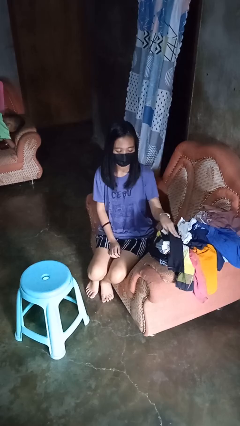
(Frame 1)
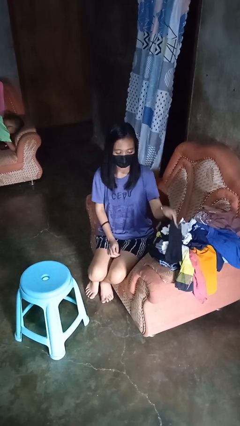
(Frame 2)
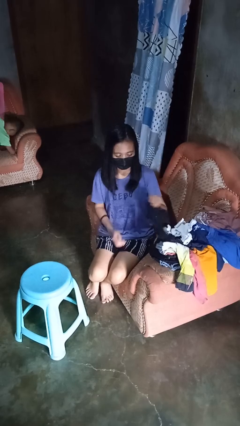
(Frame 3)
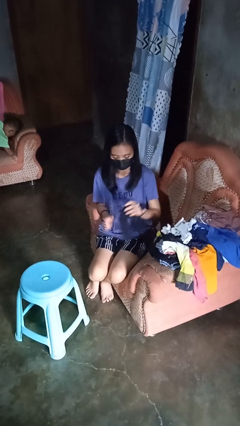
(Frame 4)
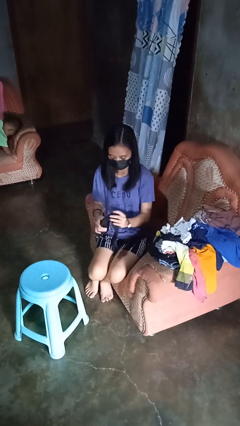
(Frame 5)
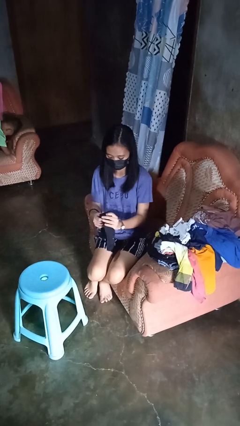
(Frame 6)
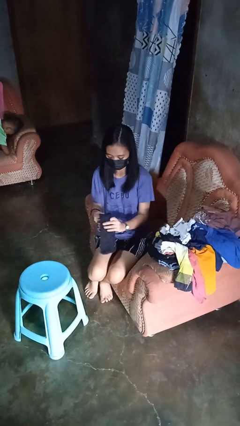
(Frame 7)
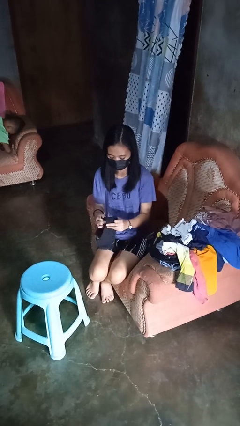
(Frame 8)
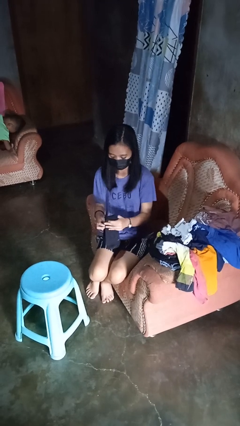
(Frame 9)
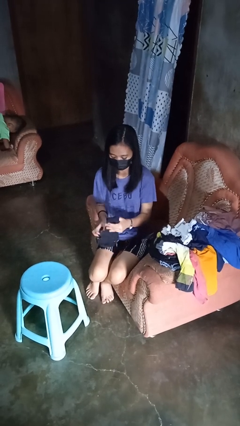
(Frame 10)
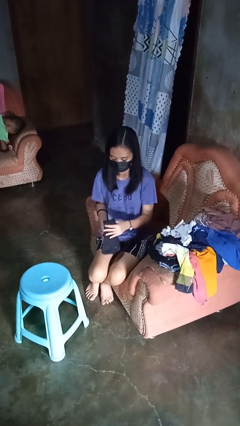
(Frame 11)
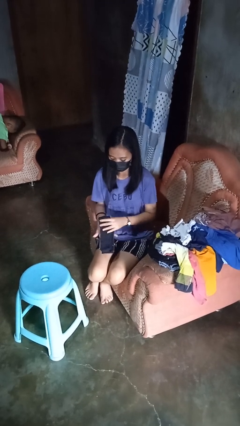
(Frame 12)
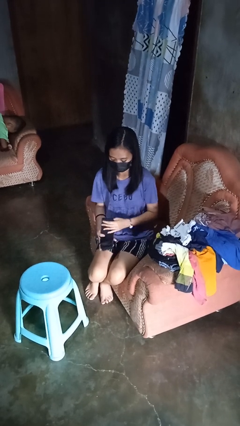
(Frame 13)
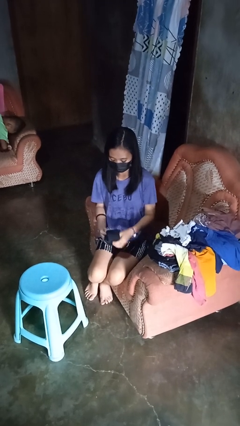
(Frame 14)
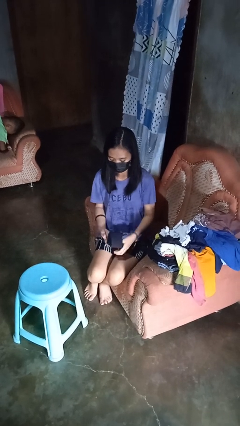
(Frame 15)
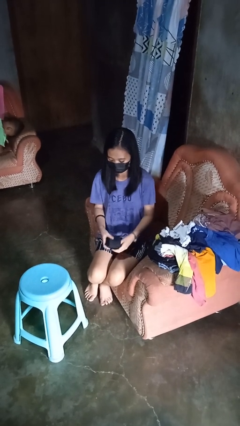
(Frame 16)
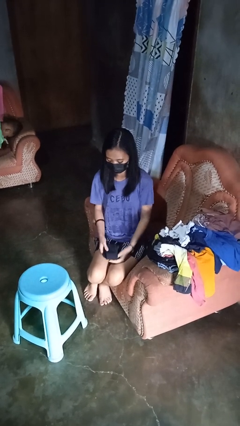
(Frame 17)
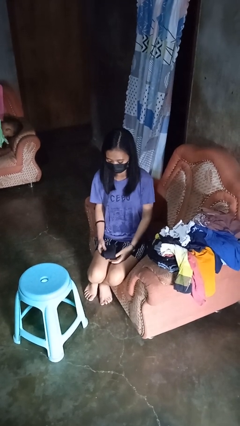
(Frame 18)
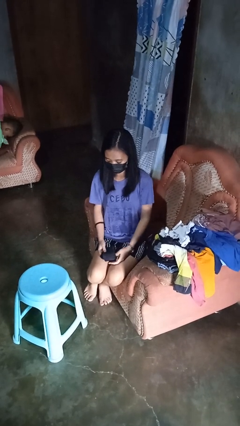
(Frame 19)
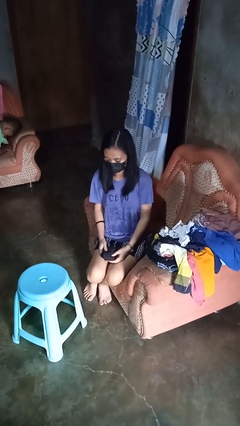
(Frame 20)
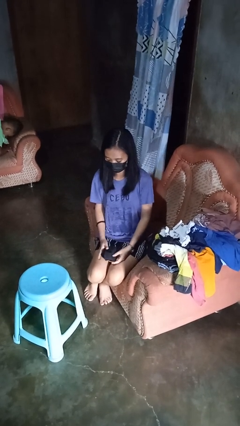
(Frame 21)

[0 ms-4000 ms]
person folds socks

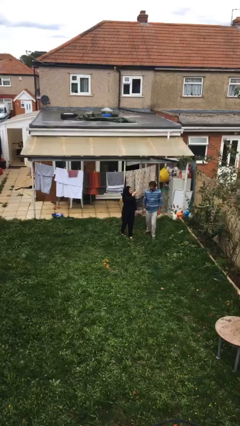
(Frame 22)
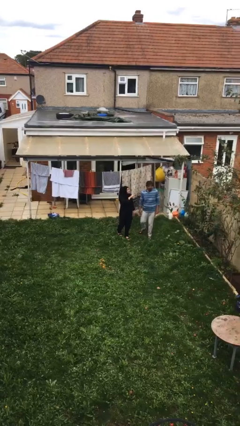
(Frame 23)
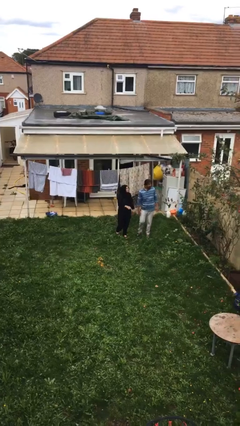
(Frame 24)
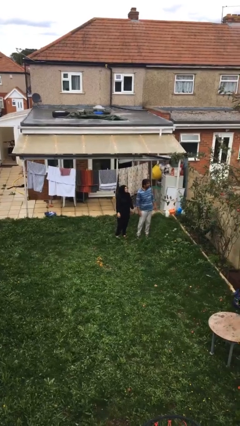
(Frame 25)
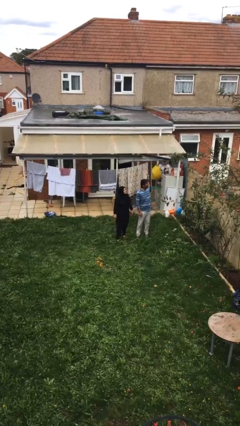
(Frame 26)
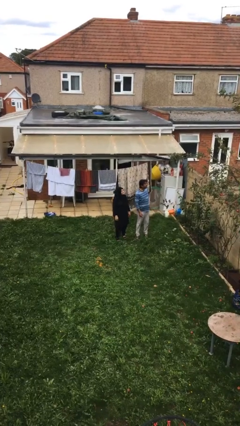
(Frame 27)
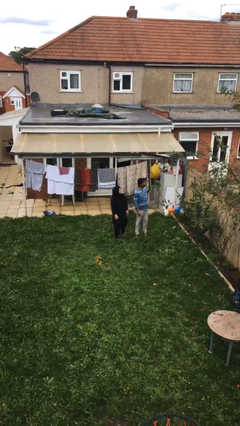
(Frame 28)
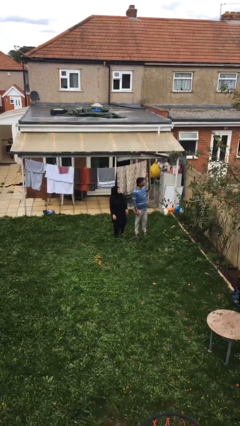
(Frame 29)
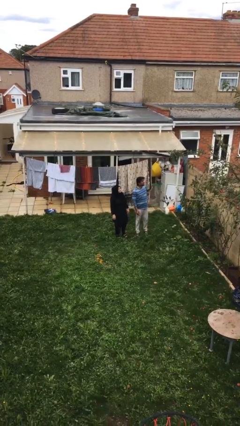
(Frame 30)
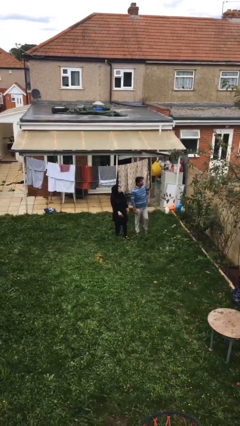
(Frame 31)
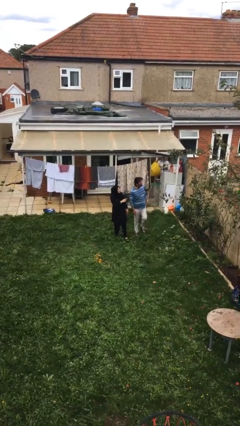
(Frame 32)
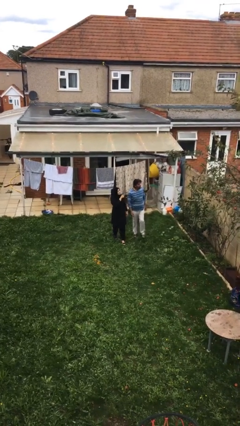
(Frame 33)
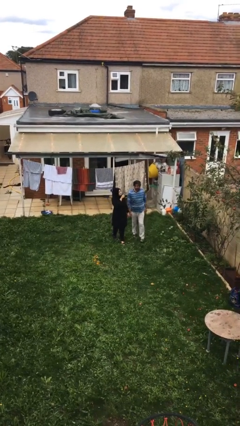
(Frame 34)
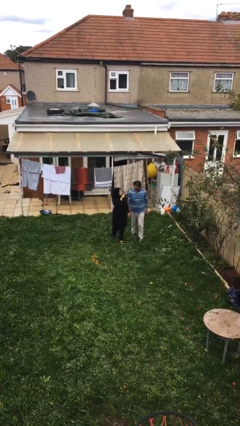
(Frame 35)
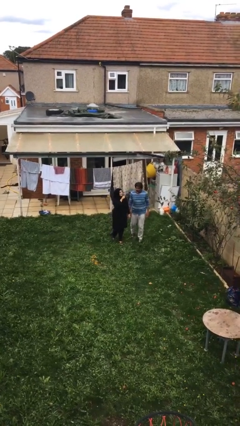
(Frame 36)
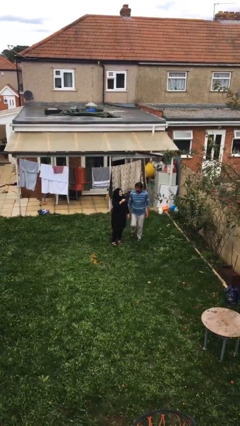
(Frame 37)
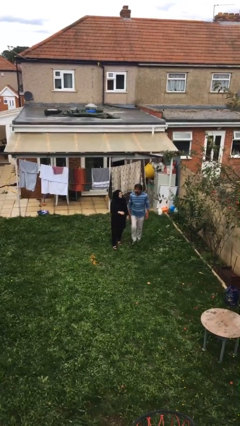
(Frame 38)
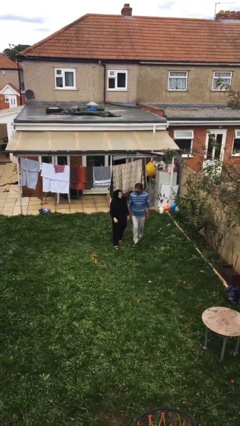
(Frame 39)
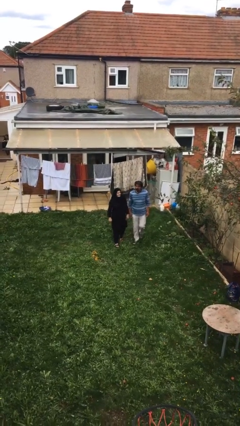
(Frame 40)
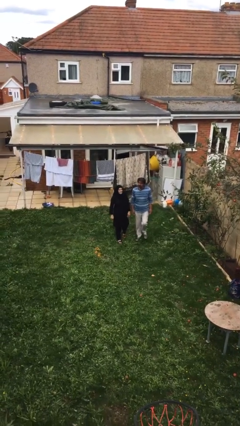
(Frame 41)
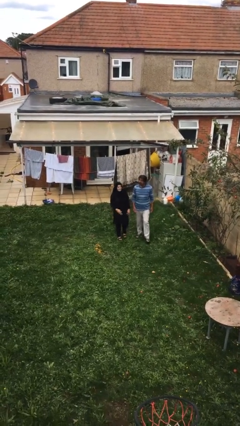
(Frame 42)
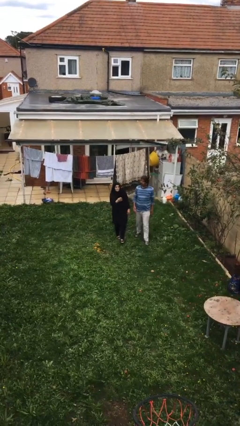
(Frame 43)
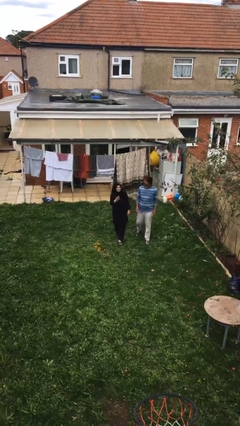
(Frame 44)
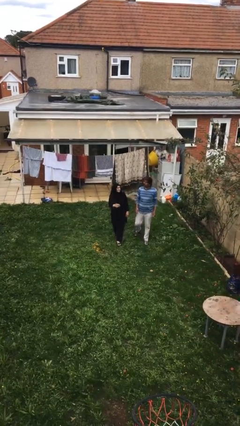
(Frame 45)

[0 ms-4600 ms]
person talks to person

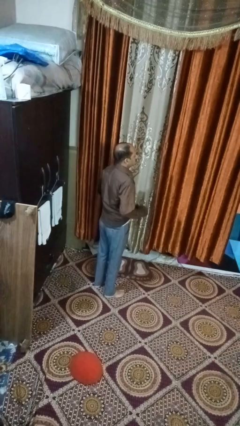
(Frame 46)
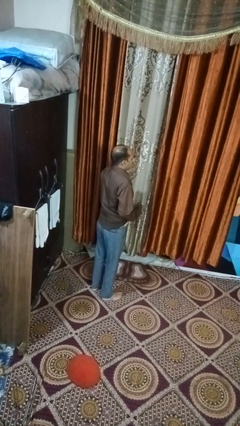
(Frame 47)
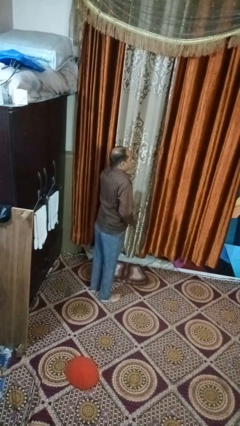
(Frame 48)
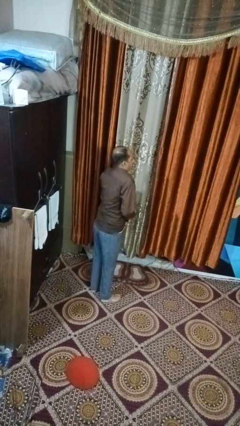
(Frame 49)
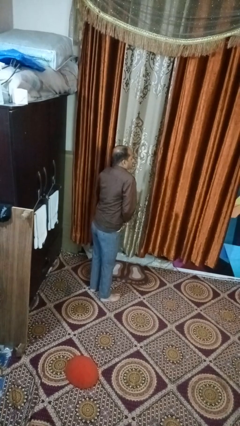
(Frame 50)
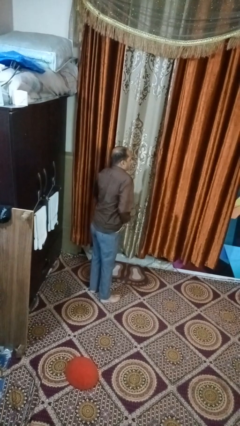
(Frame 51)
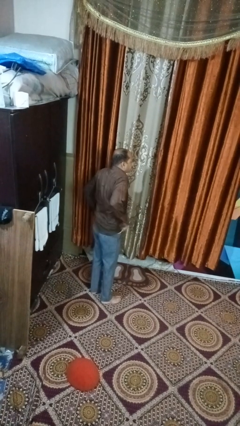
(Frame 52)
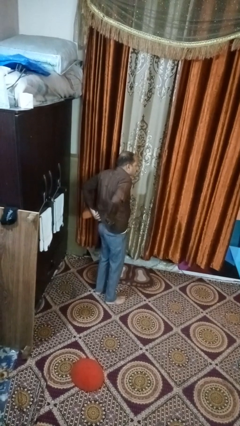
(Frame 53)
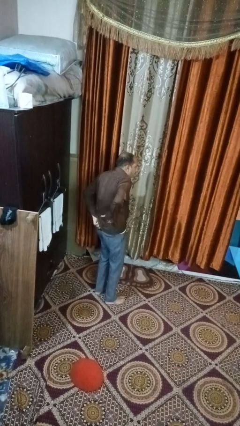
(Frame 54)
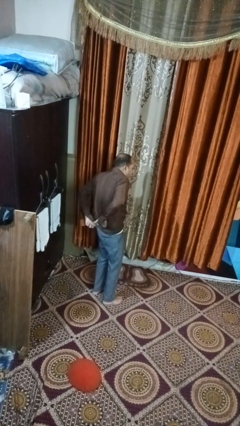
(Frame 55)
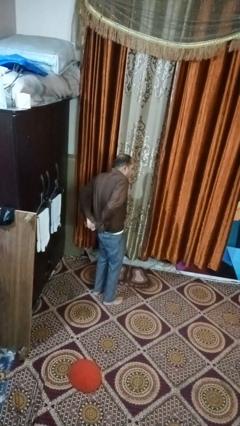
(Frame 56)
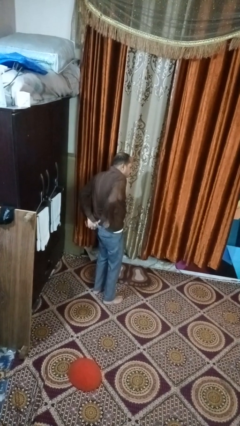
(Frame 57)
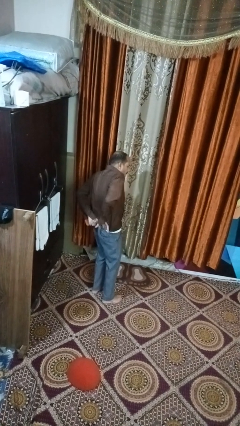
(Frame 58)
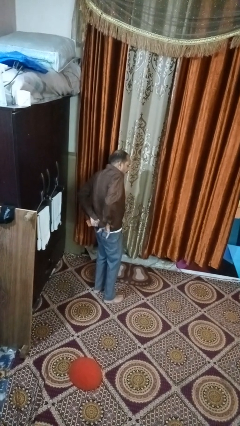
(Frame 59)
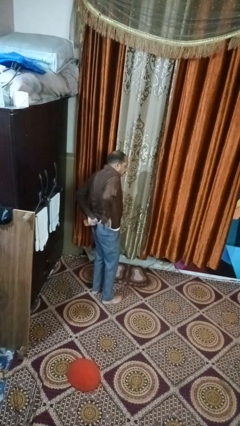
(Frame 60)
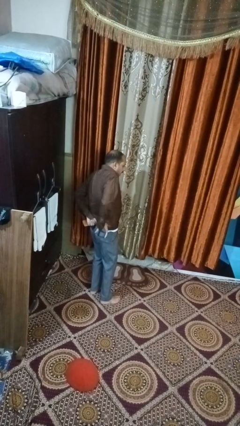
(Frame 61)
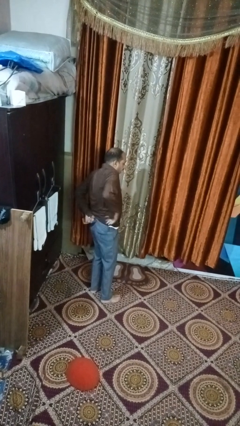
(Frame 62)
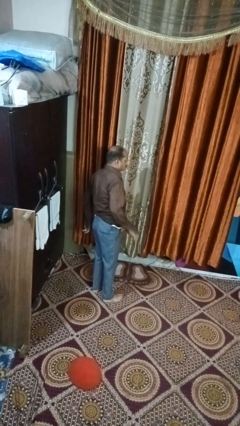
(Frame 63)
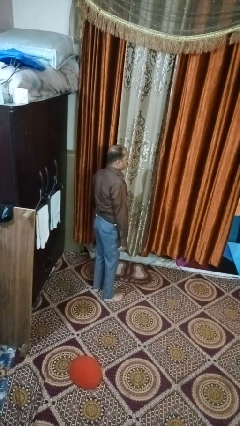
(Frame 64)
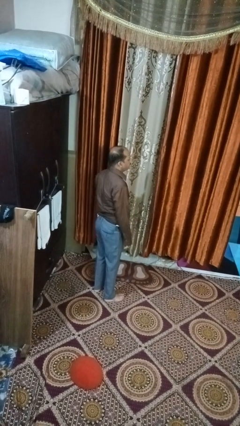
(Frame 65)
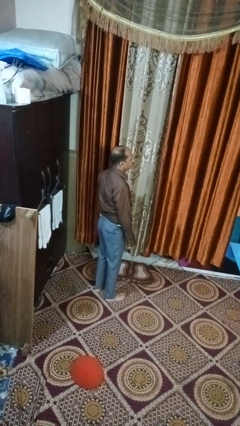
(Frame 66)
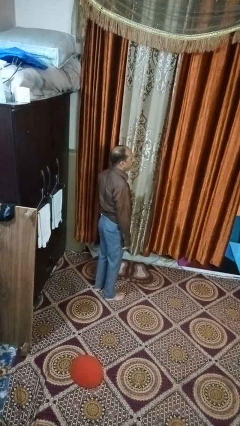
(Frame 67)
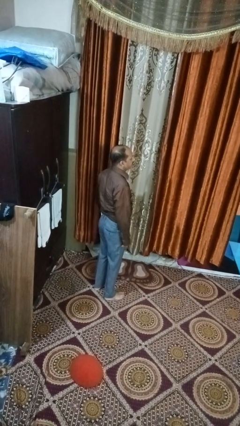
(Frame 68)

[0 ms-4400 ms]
person tucks in shirt

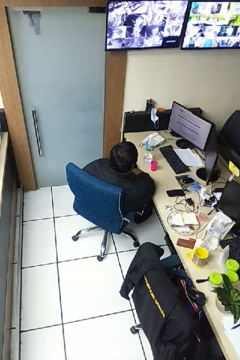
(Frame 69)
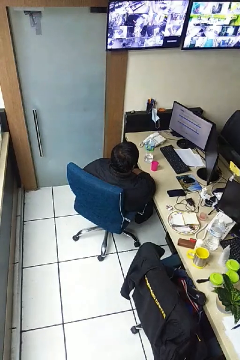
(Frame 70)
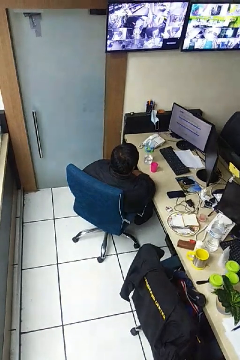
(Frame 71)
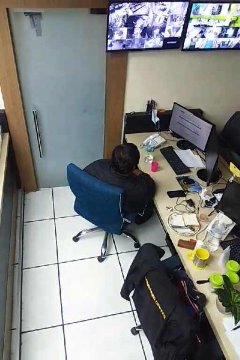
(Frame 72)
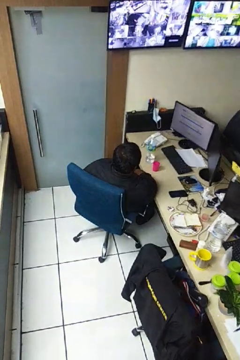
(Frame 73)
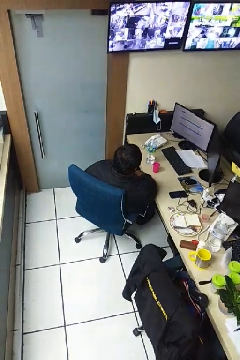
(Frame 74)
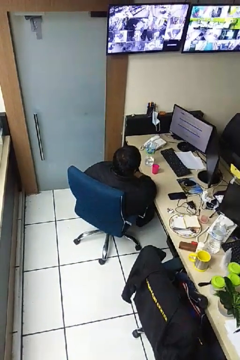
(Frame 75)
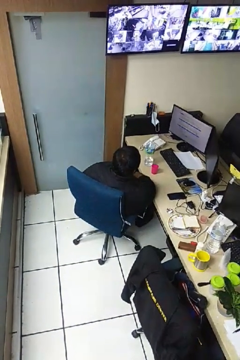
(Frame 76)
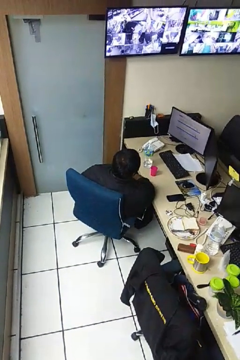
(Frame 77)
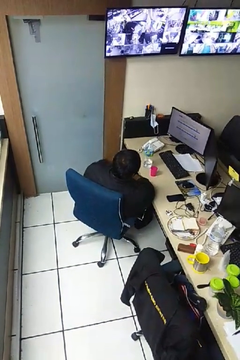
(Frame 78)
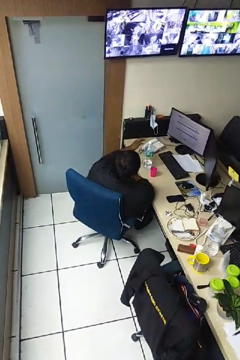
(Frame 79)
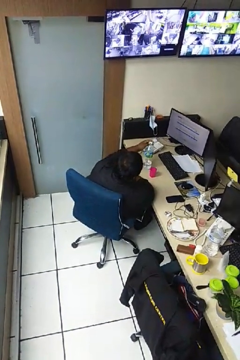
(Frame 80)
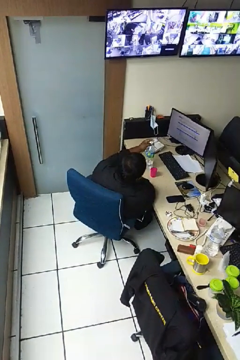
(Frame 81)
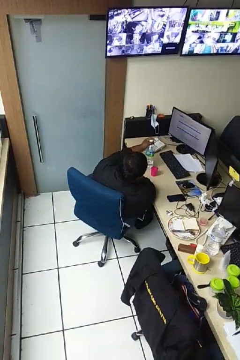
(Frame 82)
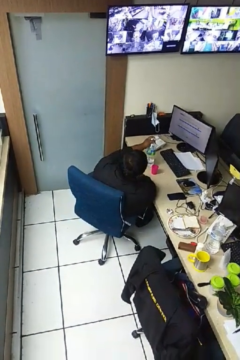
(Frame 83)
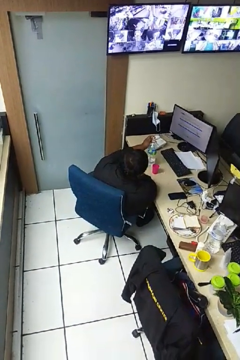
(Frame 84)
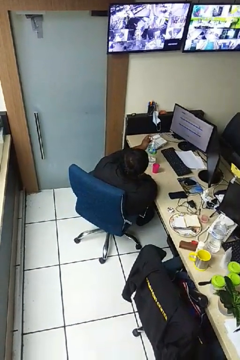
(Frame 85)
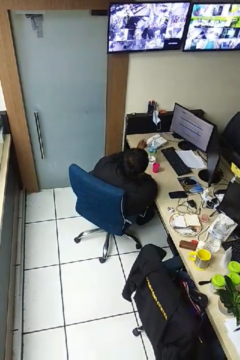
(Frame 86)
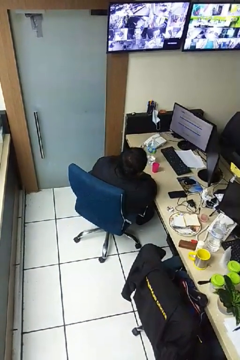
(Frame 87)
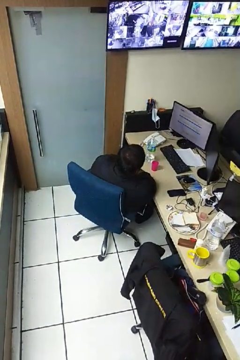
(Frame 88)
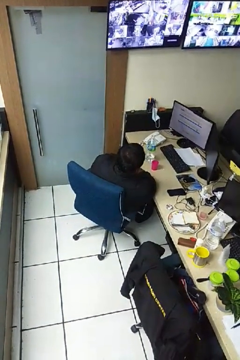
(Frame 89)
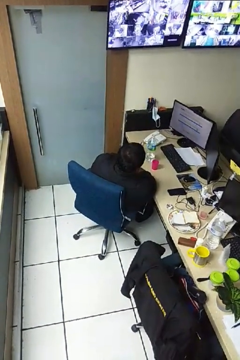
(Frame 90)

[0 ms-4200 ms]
person unscrews lid from bottle

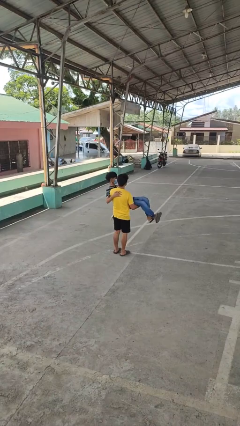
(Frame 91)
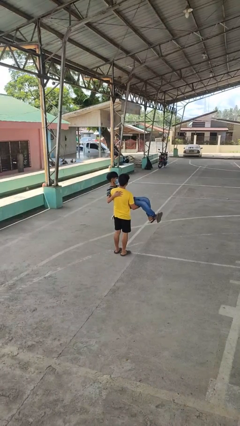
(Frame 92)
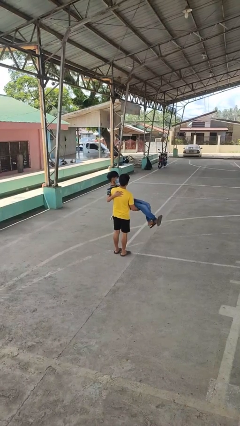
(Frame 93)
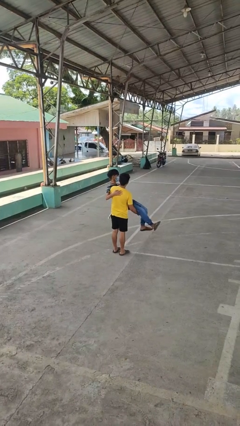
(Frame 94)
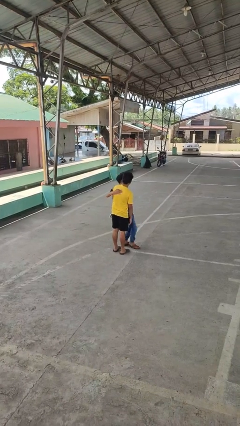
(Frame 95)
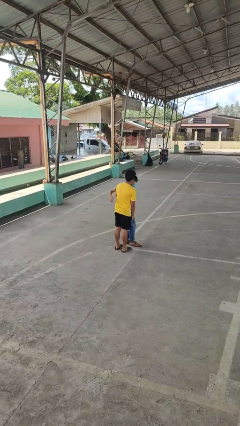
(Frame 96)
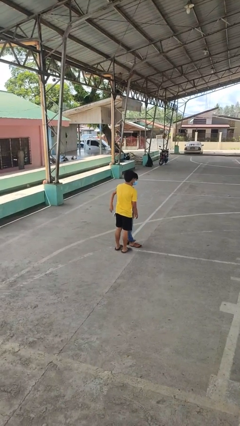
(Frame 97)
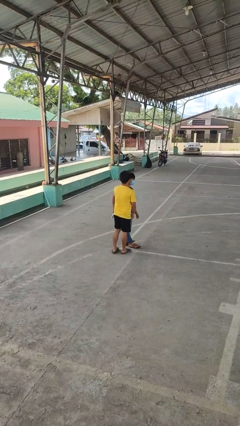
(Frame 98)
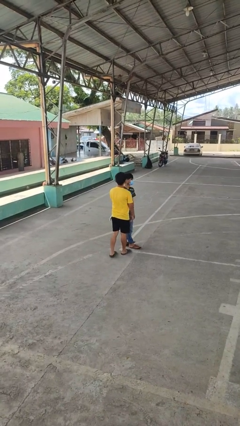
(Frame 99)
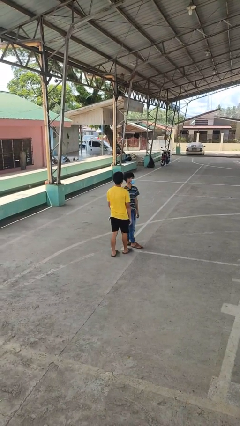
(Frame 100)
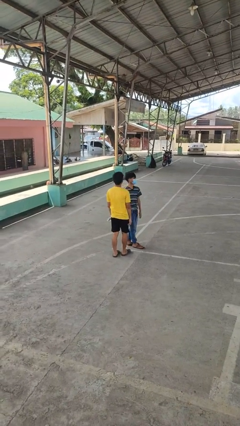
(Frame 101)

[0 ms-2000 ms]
person puts down person
